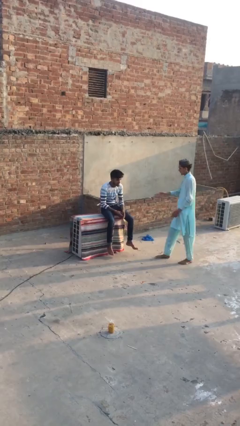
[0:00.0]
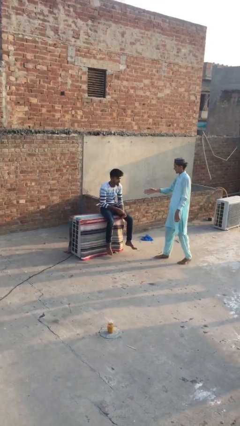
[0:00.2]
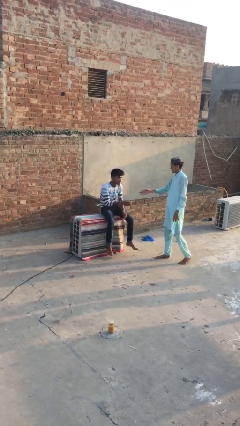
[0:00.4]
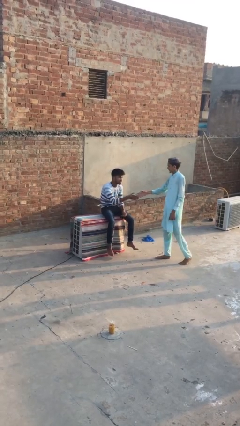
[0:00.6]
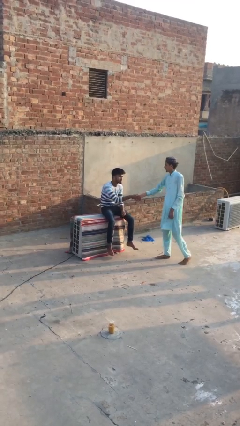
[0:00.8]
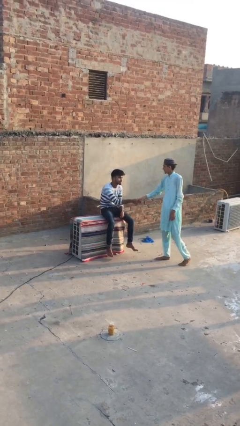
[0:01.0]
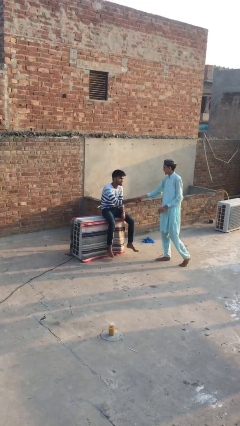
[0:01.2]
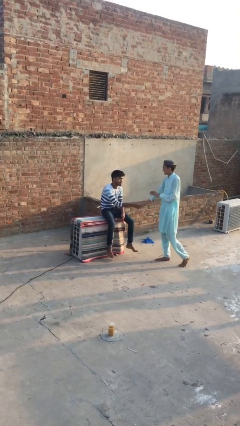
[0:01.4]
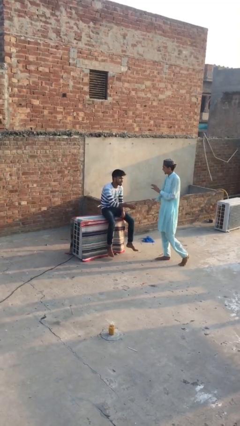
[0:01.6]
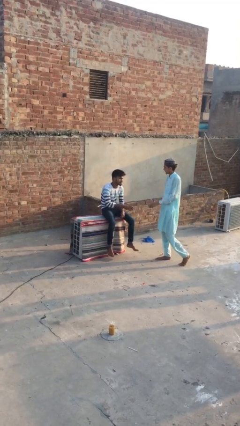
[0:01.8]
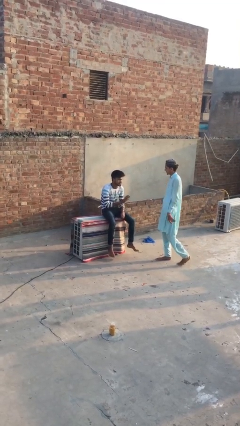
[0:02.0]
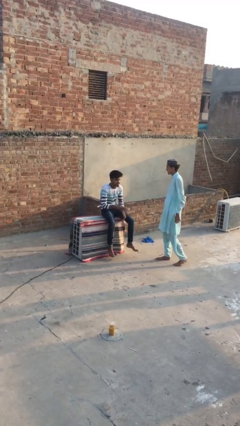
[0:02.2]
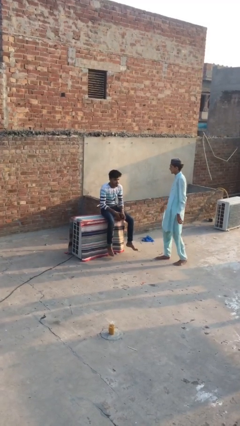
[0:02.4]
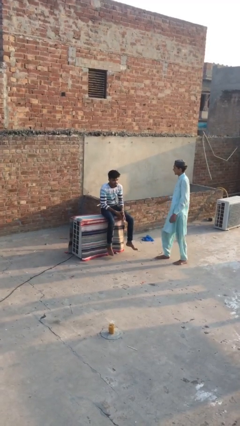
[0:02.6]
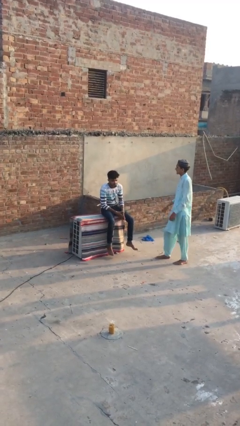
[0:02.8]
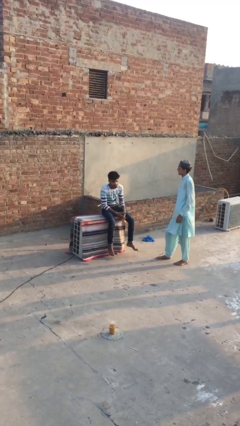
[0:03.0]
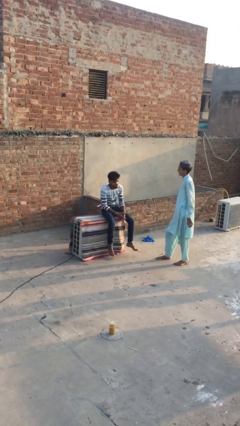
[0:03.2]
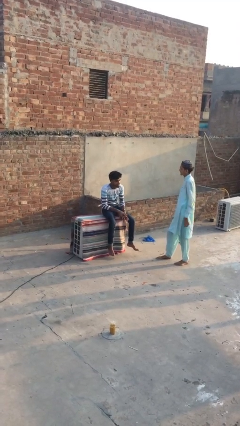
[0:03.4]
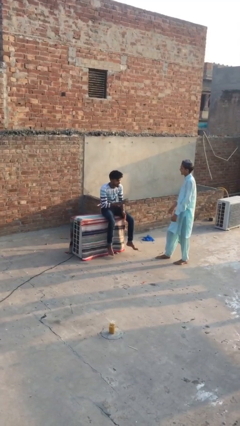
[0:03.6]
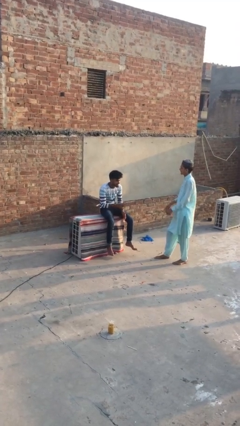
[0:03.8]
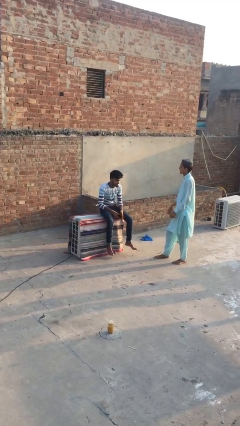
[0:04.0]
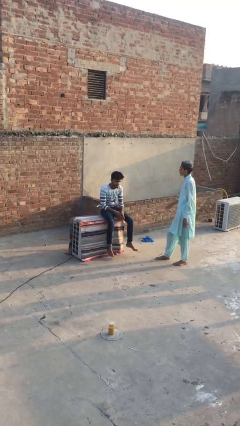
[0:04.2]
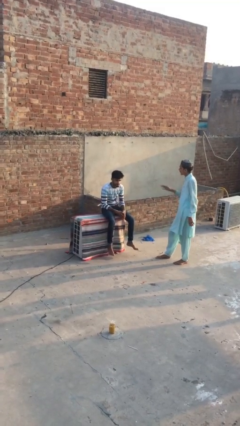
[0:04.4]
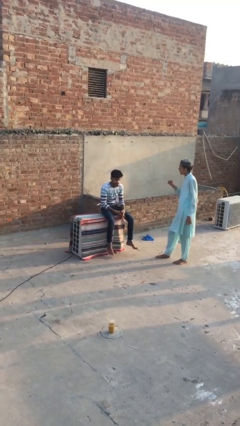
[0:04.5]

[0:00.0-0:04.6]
person shakes hand

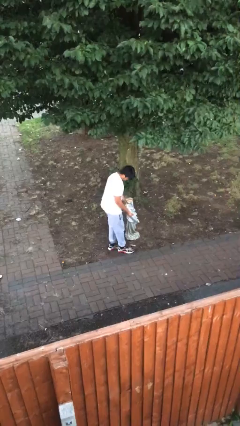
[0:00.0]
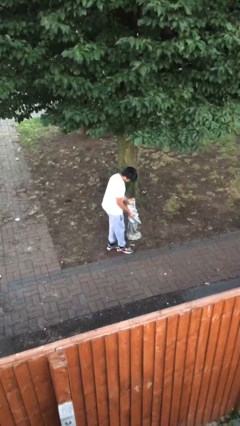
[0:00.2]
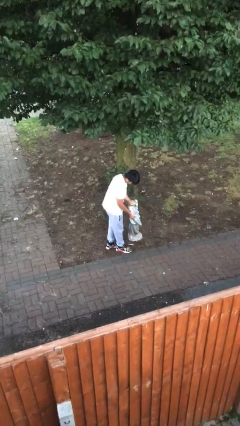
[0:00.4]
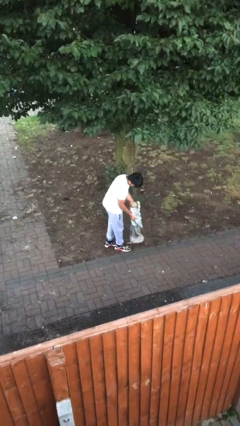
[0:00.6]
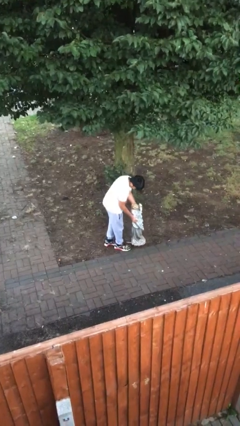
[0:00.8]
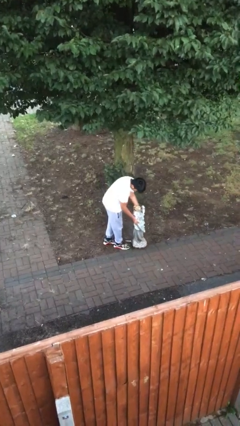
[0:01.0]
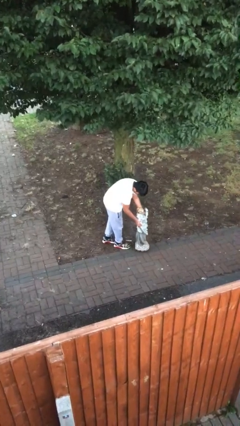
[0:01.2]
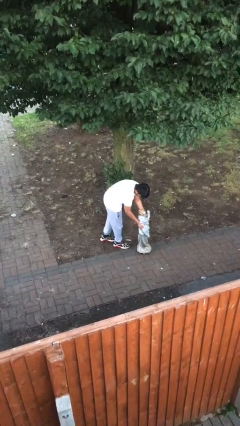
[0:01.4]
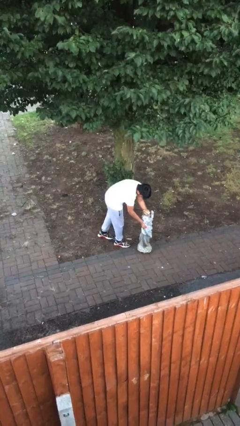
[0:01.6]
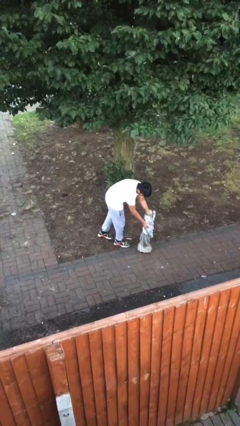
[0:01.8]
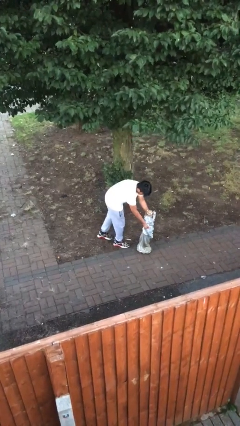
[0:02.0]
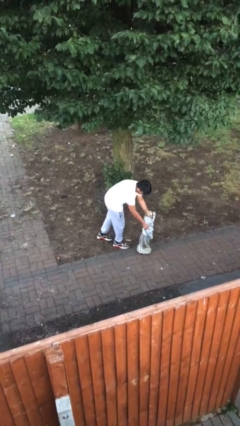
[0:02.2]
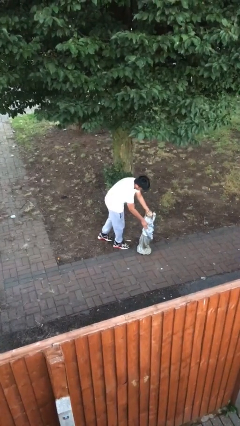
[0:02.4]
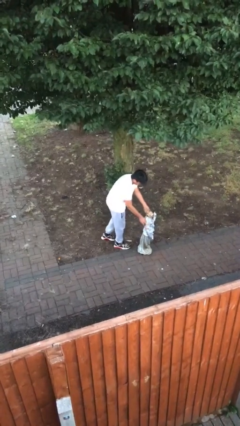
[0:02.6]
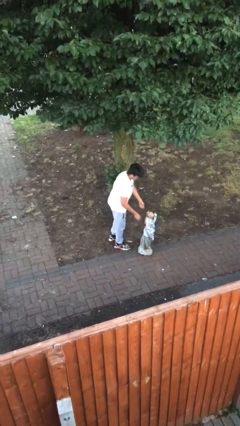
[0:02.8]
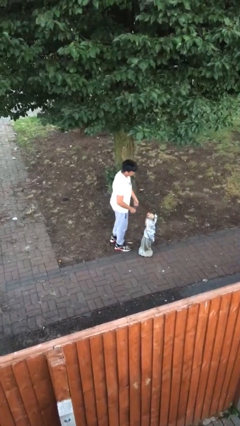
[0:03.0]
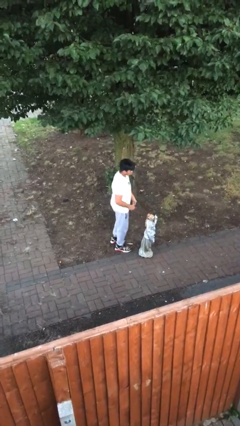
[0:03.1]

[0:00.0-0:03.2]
person puts down object on floor

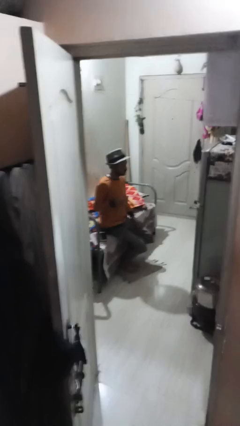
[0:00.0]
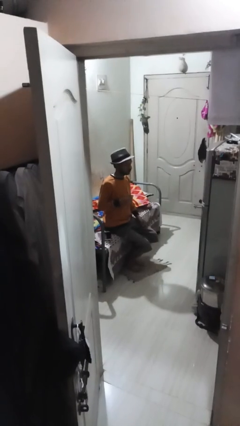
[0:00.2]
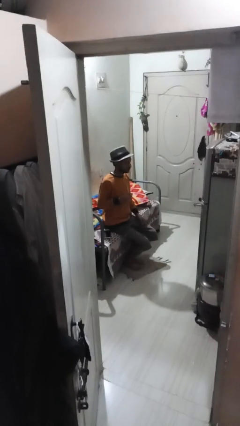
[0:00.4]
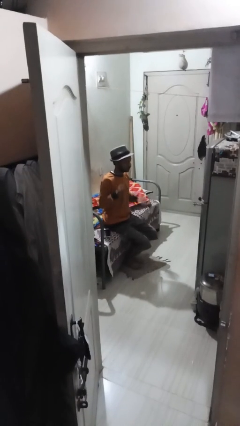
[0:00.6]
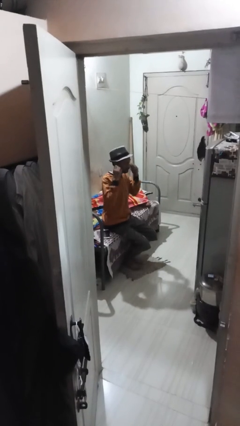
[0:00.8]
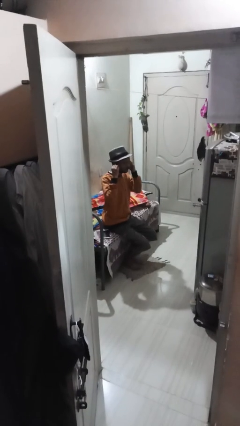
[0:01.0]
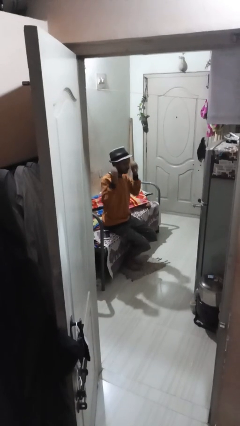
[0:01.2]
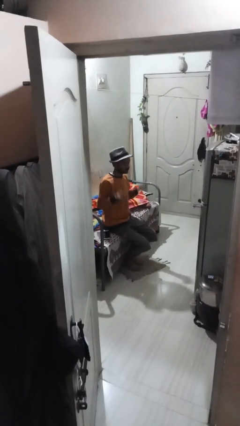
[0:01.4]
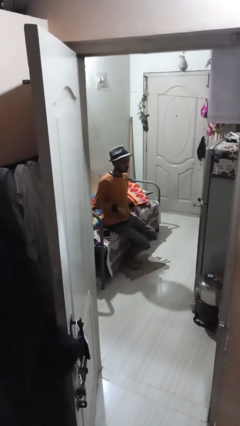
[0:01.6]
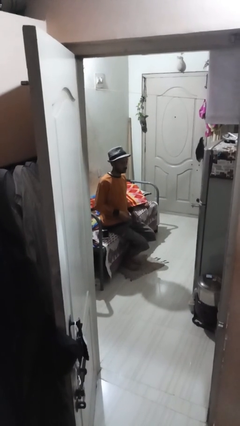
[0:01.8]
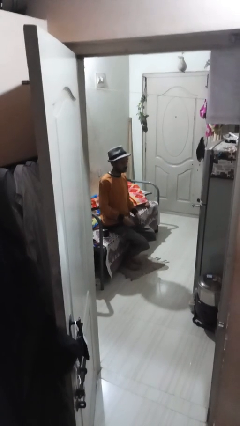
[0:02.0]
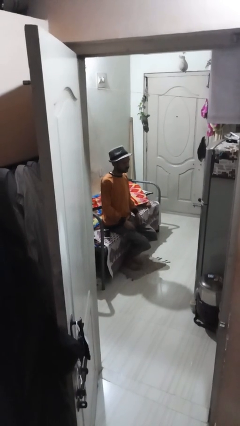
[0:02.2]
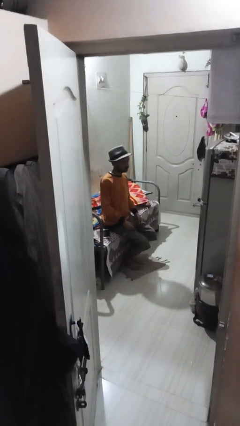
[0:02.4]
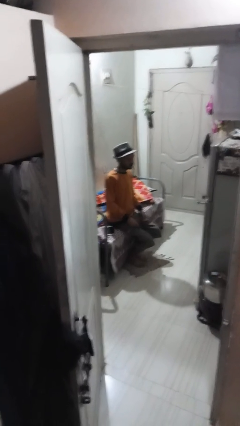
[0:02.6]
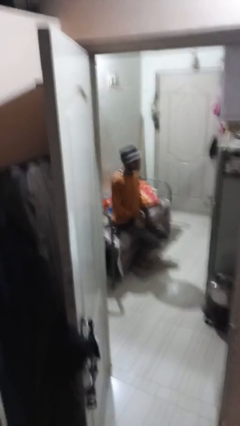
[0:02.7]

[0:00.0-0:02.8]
person takes off headphones

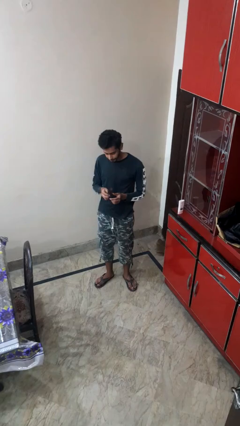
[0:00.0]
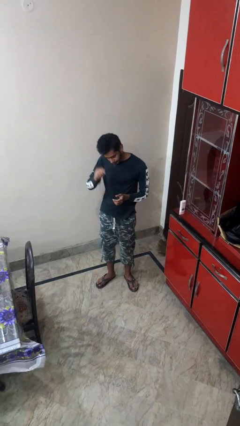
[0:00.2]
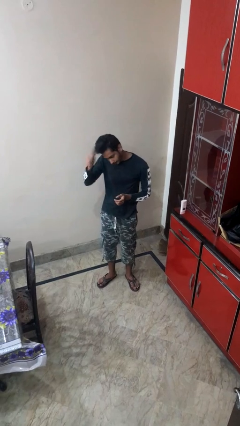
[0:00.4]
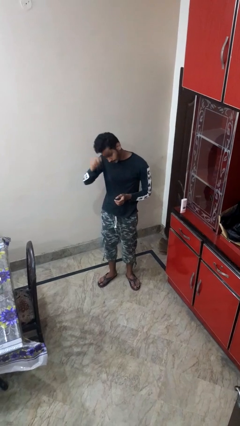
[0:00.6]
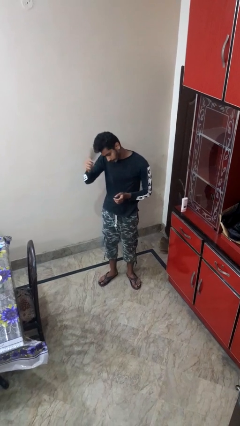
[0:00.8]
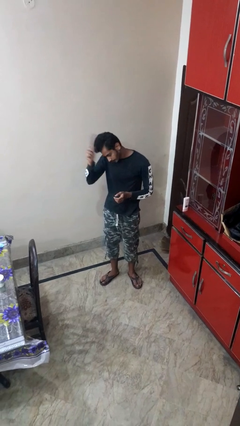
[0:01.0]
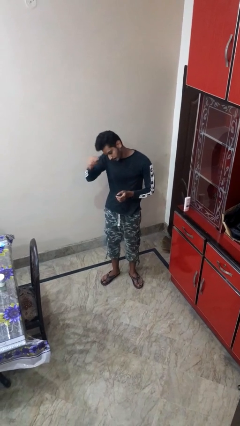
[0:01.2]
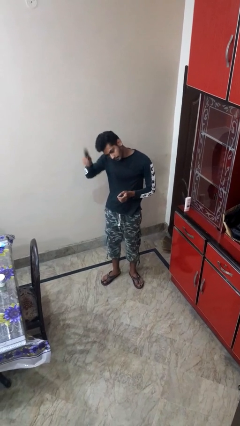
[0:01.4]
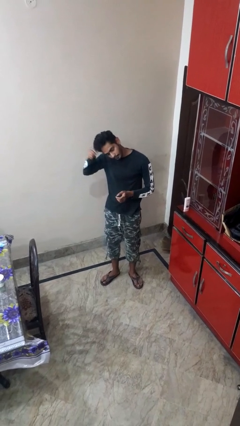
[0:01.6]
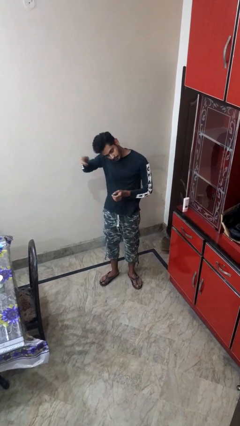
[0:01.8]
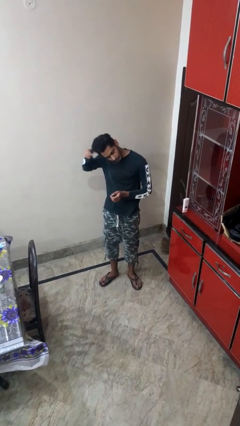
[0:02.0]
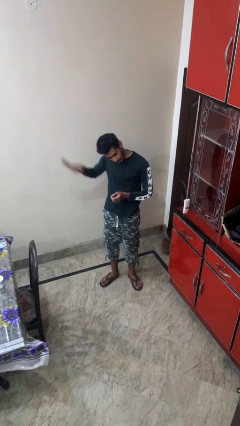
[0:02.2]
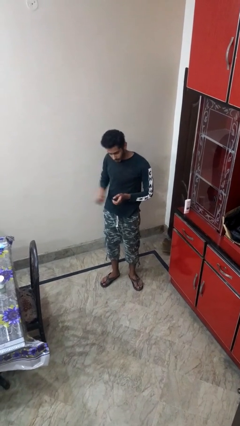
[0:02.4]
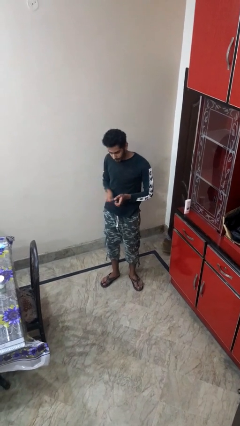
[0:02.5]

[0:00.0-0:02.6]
person brushes hair

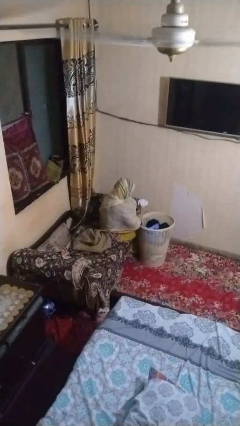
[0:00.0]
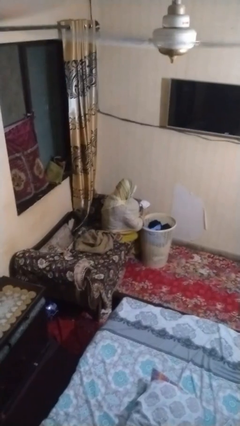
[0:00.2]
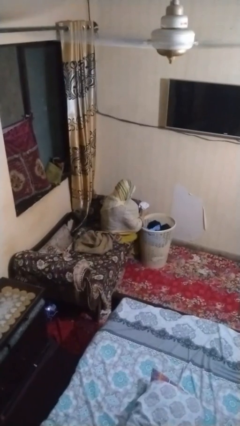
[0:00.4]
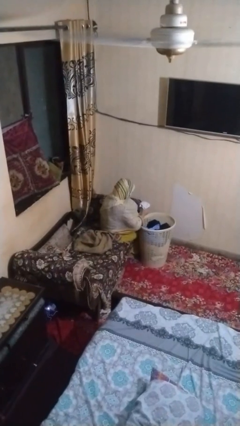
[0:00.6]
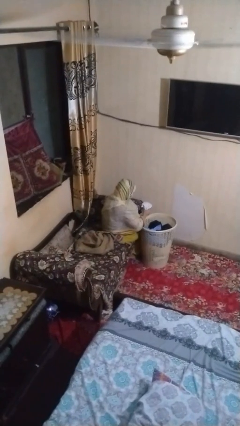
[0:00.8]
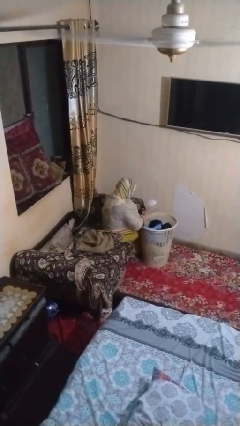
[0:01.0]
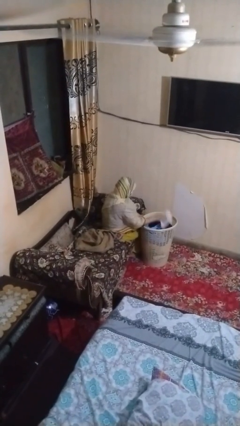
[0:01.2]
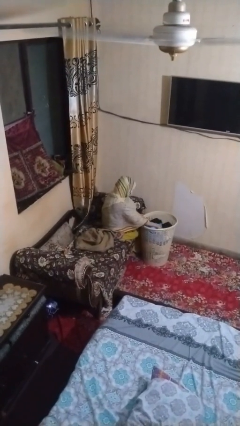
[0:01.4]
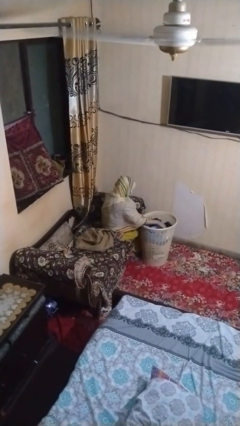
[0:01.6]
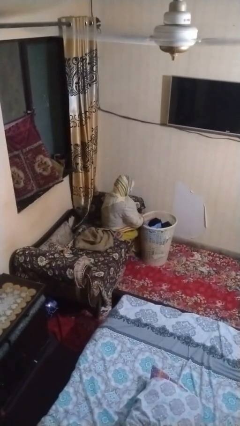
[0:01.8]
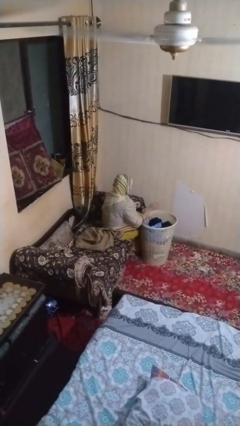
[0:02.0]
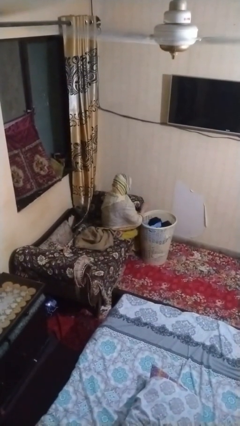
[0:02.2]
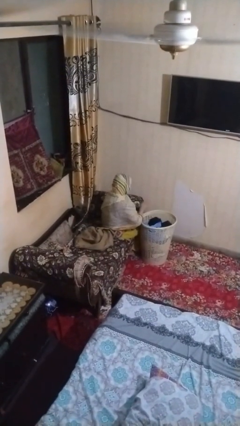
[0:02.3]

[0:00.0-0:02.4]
person puts object into basket

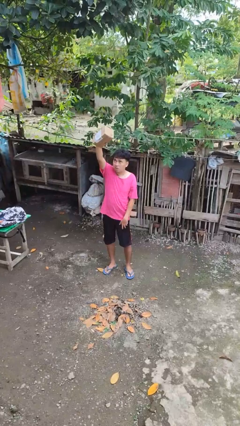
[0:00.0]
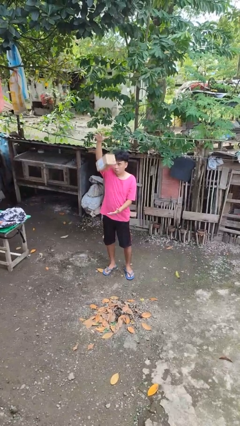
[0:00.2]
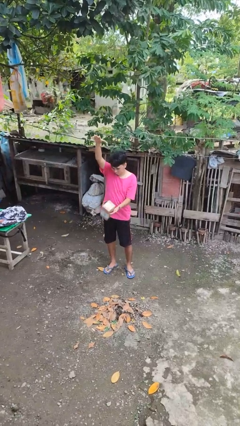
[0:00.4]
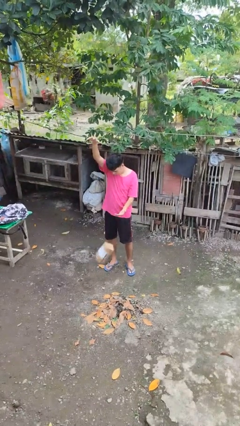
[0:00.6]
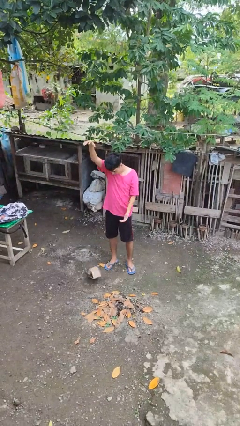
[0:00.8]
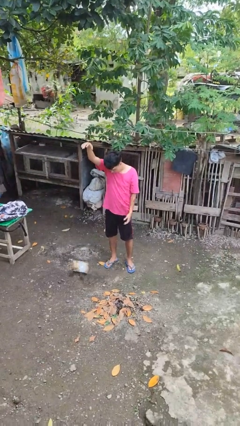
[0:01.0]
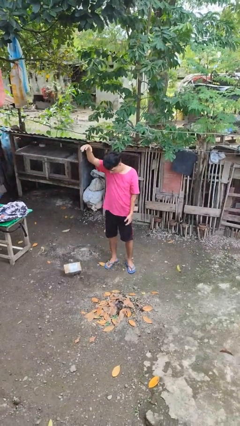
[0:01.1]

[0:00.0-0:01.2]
person drops object

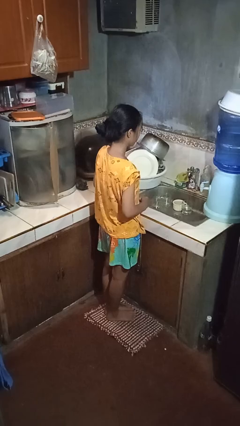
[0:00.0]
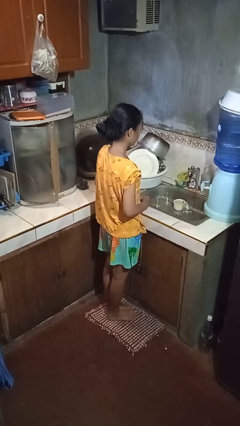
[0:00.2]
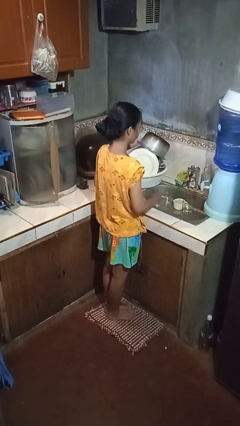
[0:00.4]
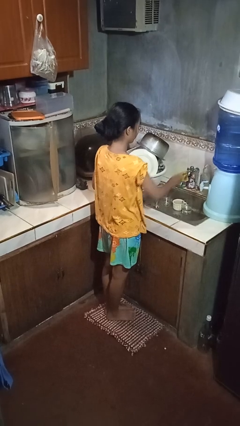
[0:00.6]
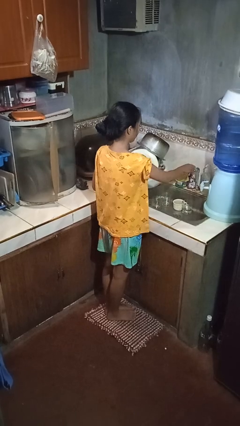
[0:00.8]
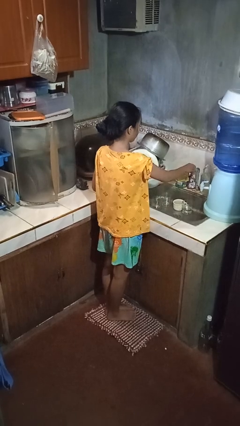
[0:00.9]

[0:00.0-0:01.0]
person turns on faucet
